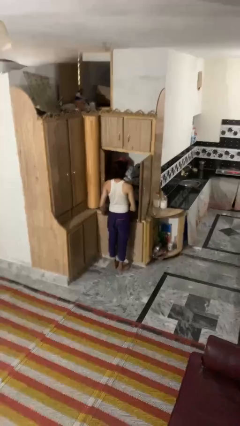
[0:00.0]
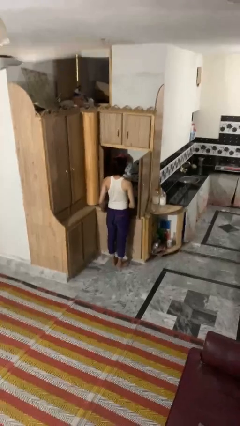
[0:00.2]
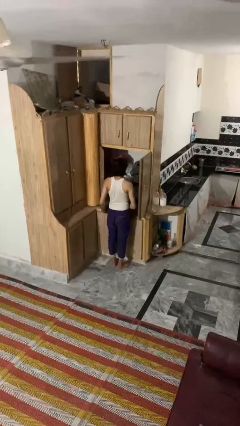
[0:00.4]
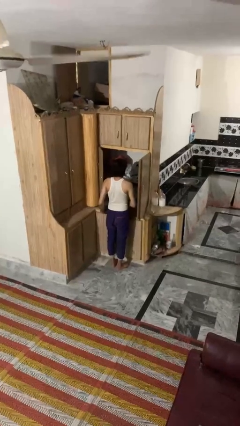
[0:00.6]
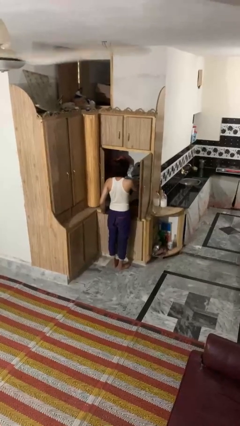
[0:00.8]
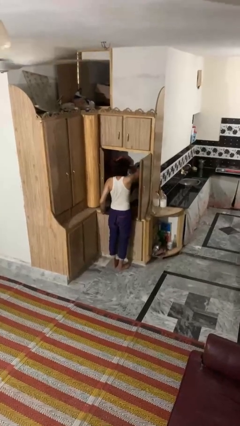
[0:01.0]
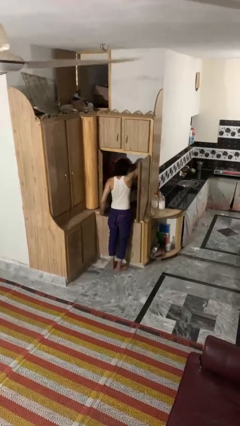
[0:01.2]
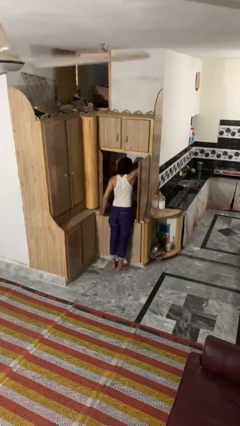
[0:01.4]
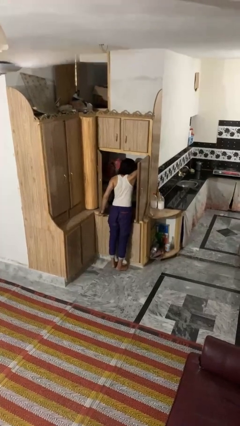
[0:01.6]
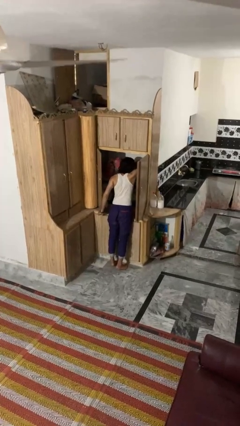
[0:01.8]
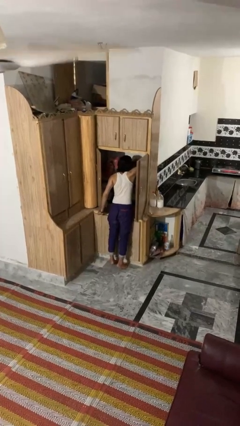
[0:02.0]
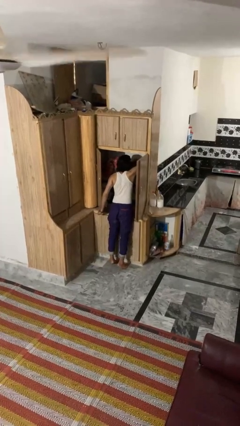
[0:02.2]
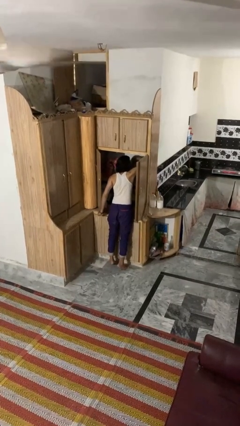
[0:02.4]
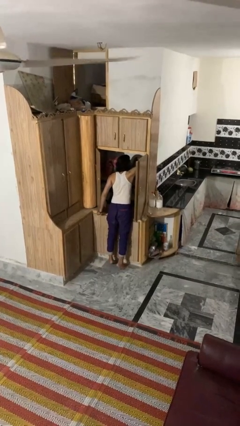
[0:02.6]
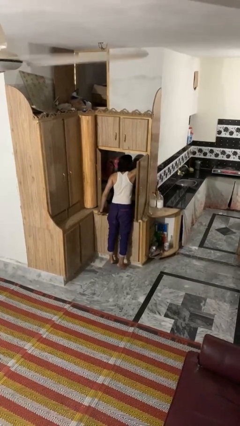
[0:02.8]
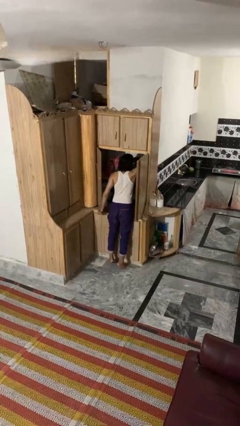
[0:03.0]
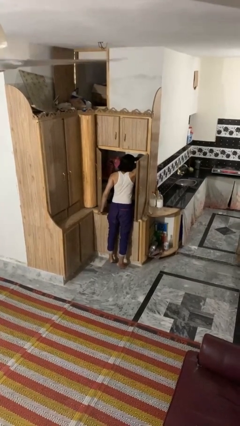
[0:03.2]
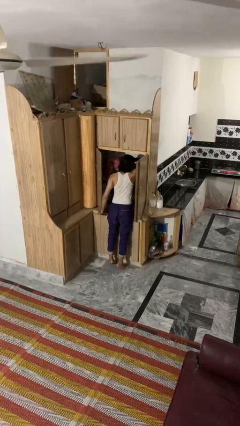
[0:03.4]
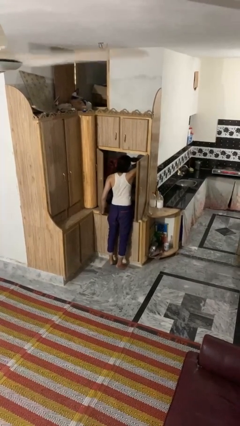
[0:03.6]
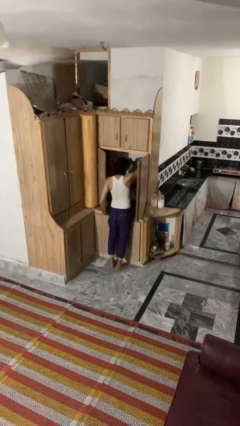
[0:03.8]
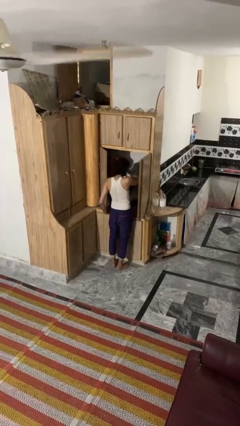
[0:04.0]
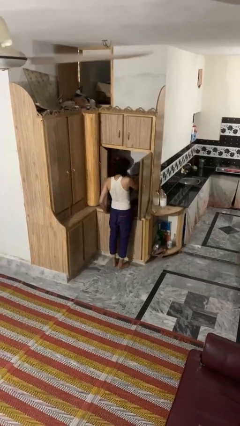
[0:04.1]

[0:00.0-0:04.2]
person searches in cabinet

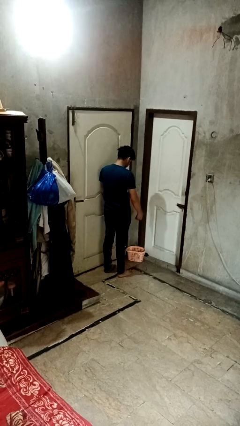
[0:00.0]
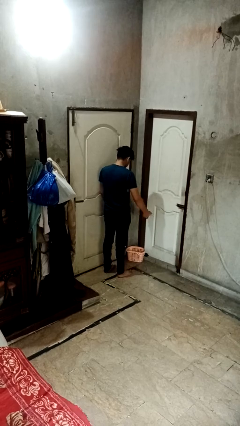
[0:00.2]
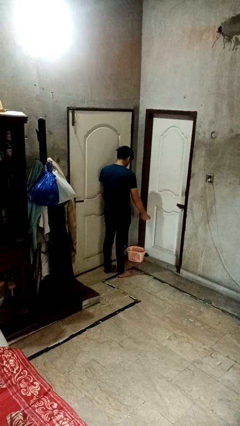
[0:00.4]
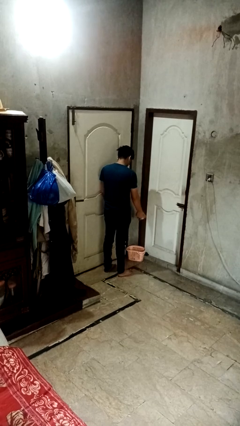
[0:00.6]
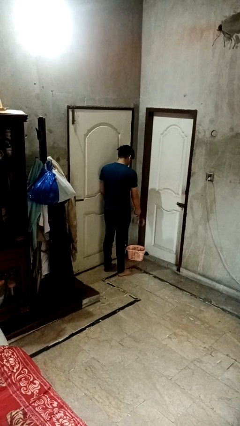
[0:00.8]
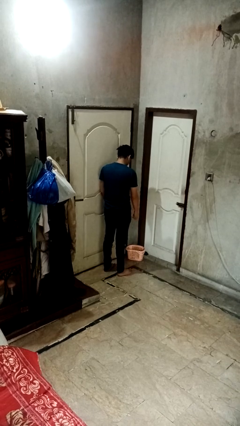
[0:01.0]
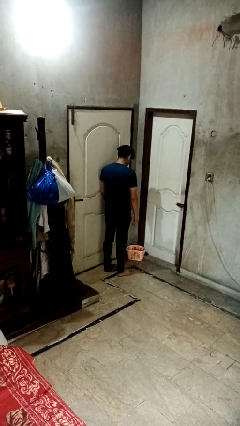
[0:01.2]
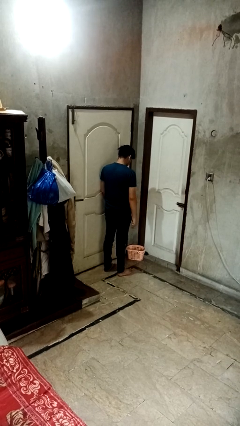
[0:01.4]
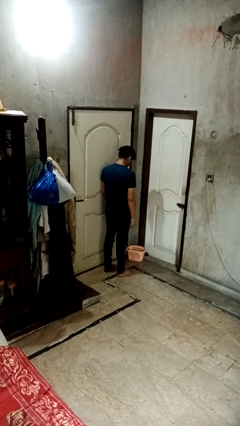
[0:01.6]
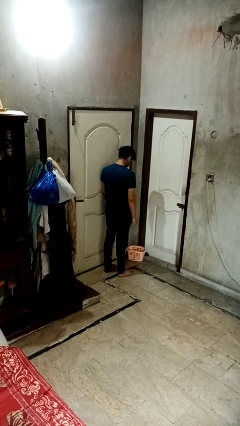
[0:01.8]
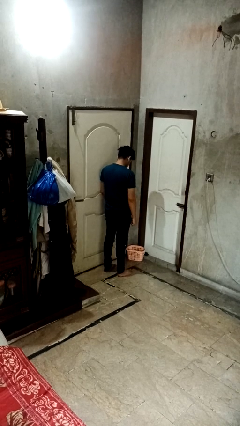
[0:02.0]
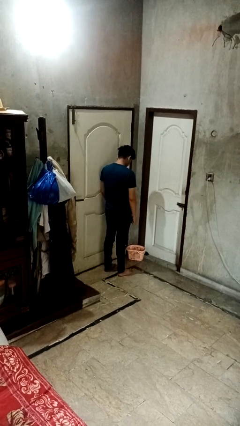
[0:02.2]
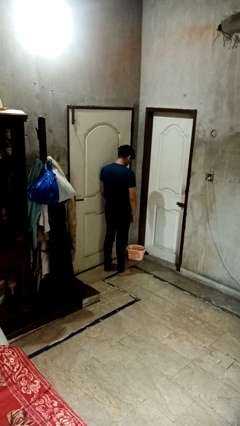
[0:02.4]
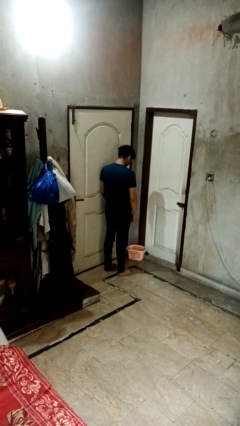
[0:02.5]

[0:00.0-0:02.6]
person discards trash

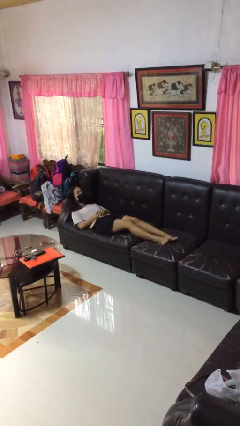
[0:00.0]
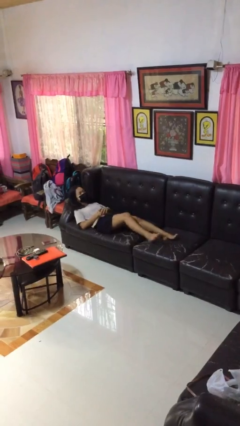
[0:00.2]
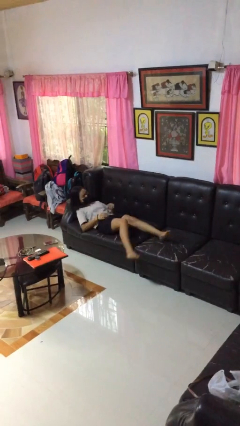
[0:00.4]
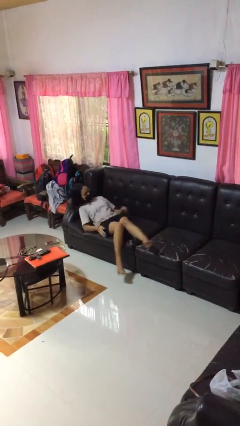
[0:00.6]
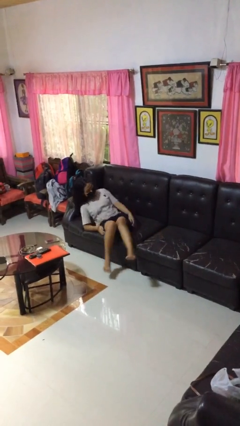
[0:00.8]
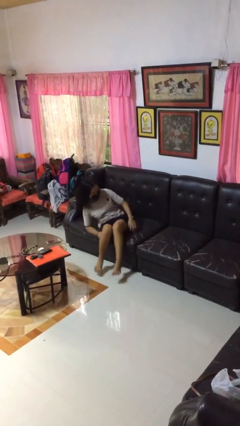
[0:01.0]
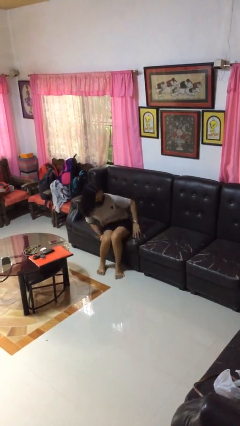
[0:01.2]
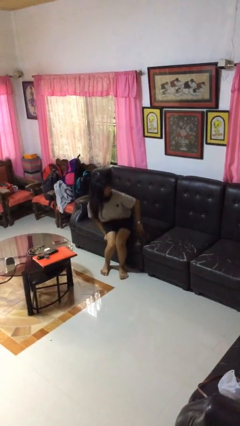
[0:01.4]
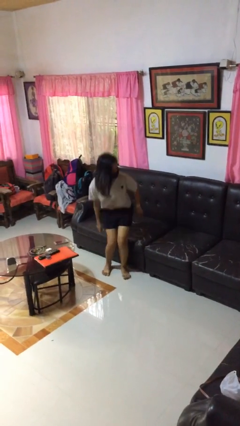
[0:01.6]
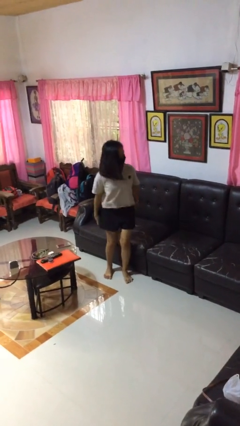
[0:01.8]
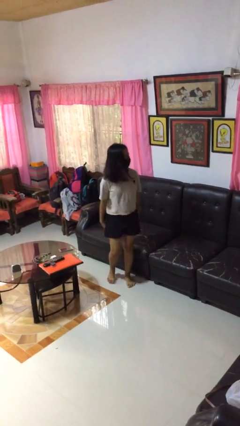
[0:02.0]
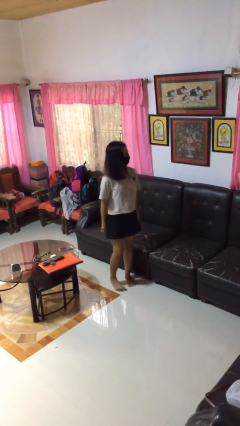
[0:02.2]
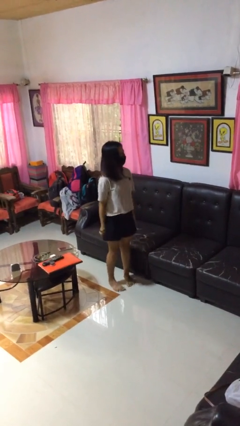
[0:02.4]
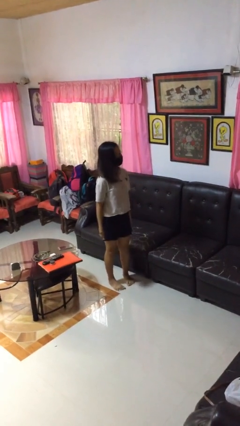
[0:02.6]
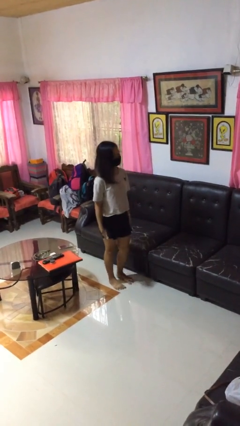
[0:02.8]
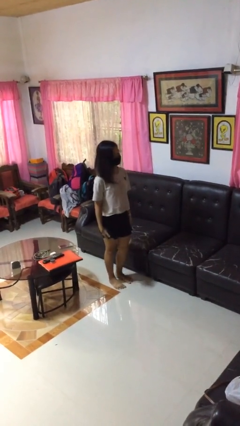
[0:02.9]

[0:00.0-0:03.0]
person stands up

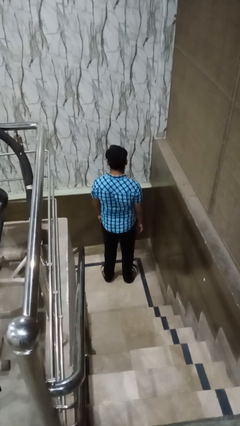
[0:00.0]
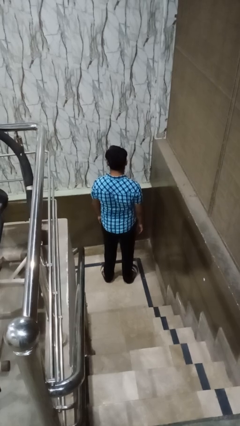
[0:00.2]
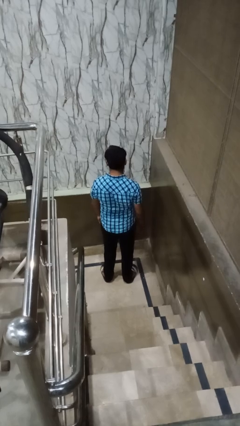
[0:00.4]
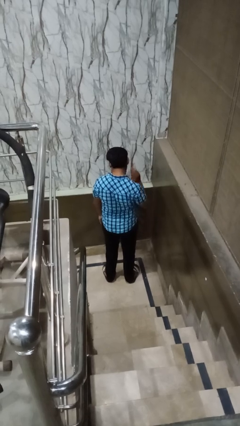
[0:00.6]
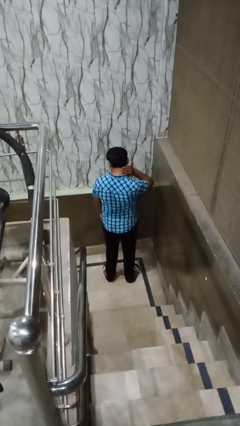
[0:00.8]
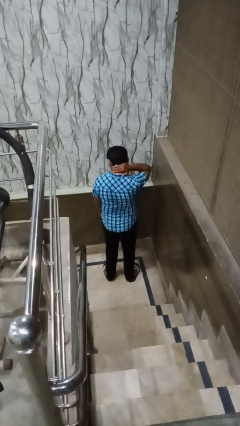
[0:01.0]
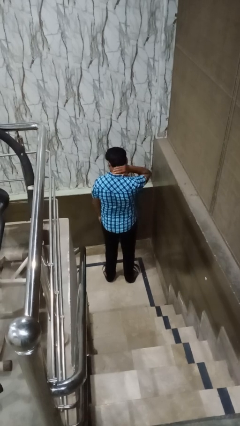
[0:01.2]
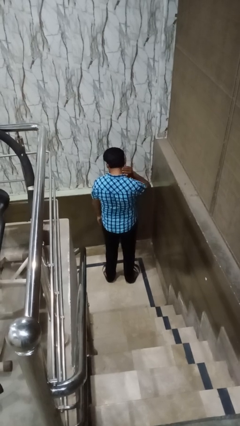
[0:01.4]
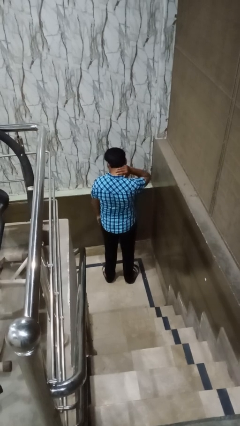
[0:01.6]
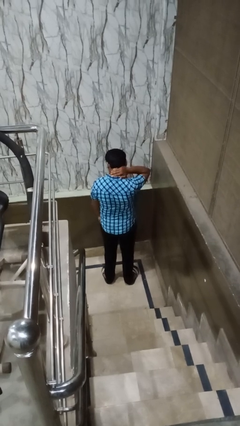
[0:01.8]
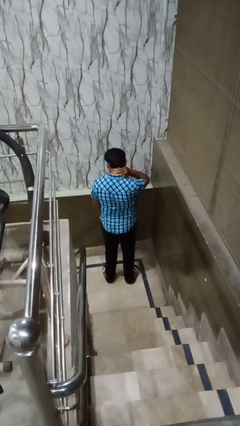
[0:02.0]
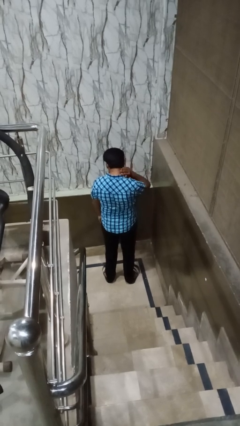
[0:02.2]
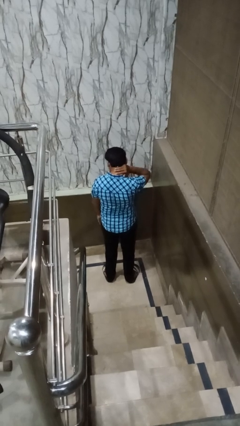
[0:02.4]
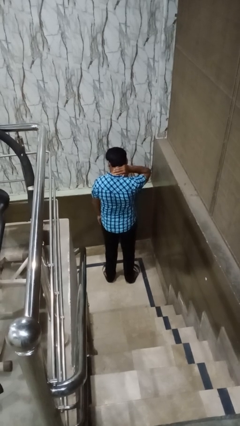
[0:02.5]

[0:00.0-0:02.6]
person rubs neck

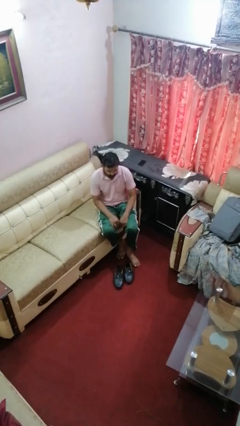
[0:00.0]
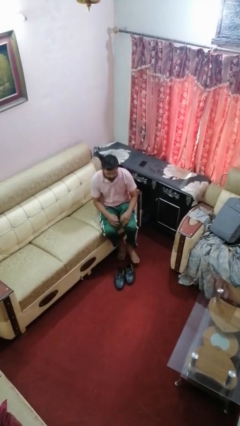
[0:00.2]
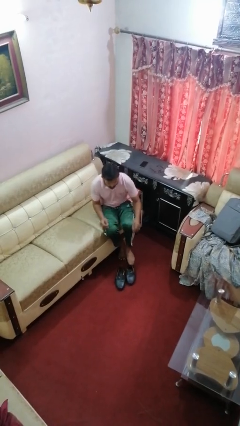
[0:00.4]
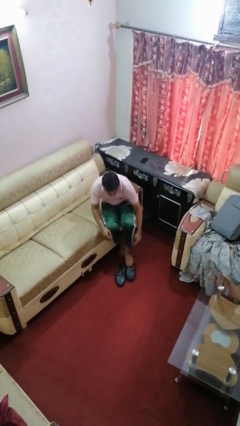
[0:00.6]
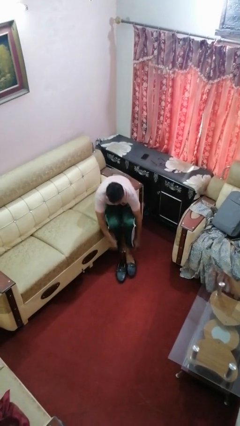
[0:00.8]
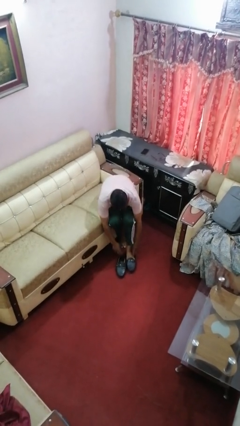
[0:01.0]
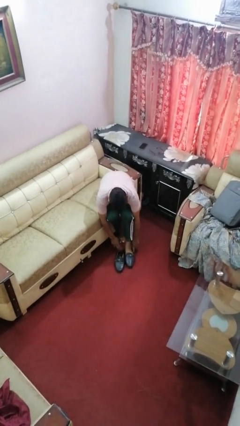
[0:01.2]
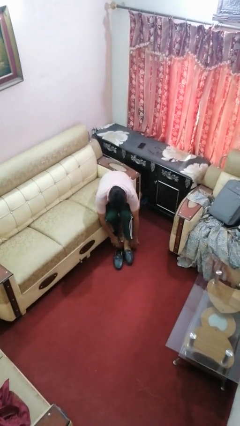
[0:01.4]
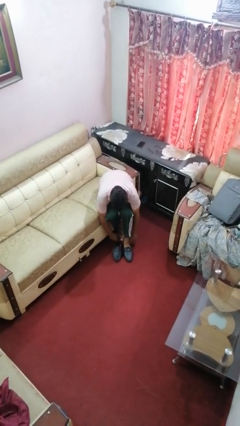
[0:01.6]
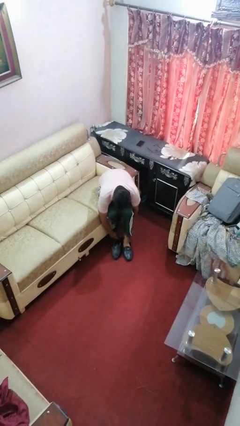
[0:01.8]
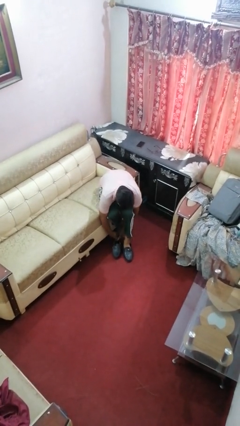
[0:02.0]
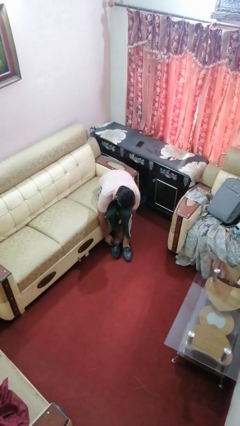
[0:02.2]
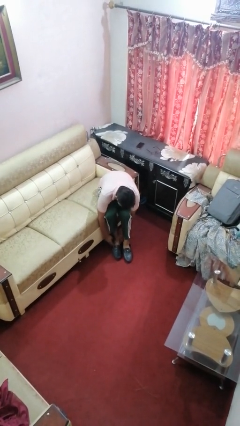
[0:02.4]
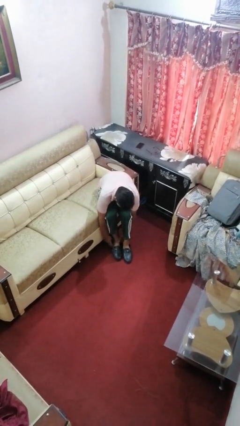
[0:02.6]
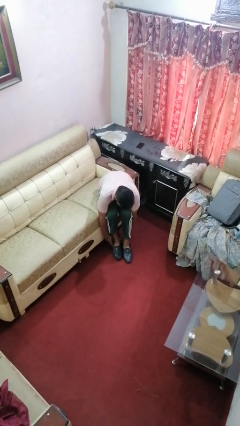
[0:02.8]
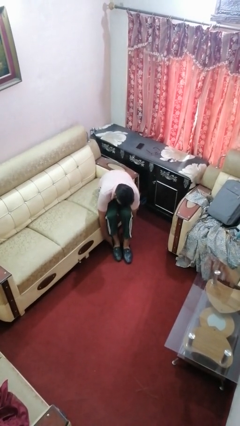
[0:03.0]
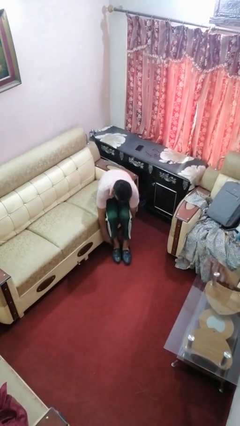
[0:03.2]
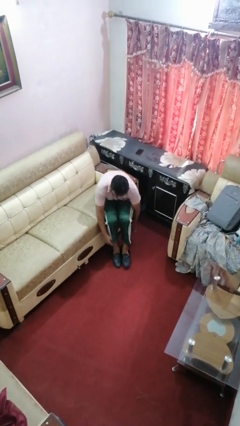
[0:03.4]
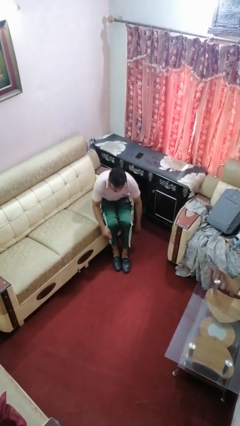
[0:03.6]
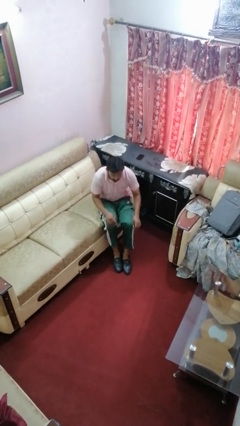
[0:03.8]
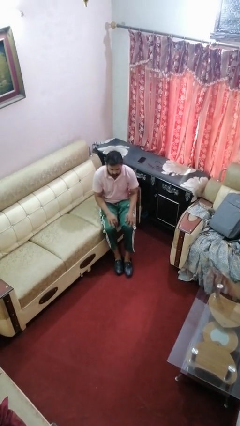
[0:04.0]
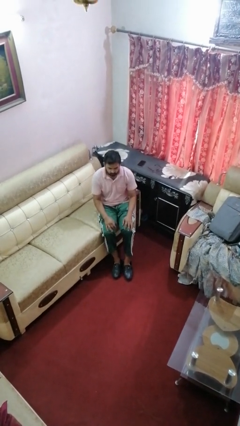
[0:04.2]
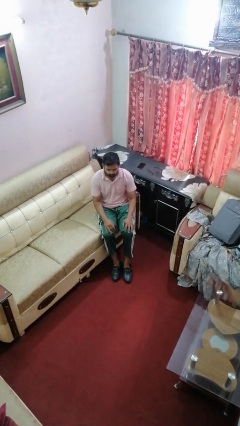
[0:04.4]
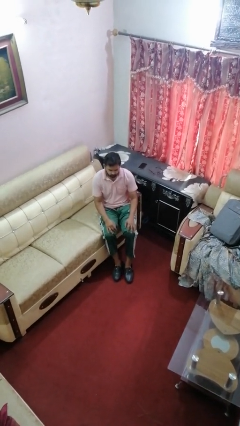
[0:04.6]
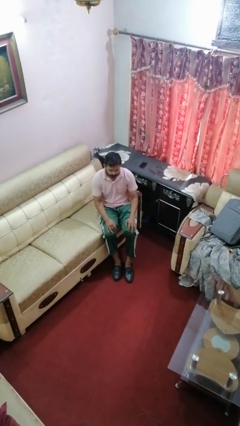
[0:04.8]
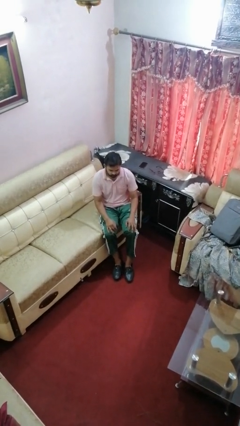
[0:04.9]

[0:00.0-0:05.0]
person puts on shoes
